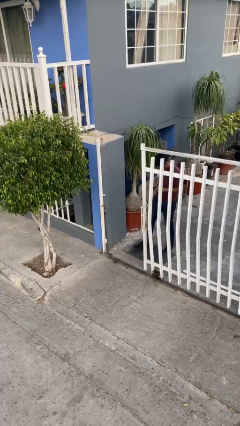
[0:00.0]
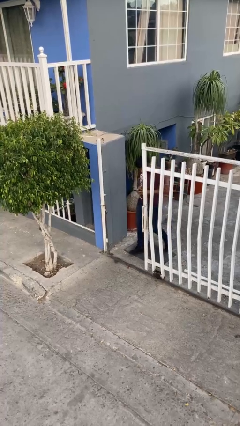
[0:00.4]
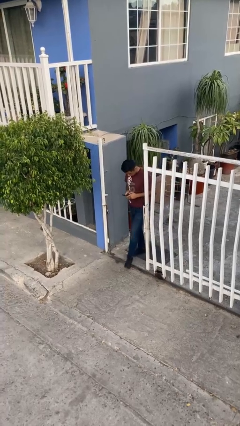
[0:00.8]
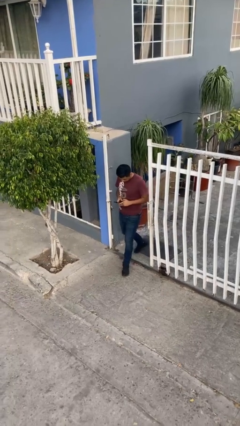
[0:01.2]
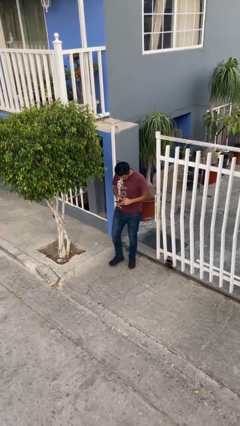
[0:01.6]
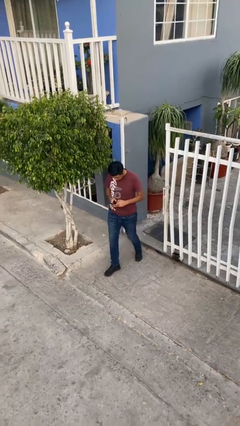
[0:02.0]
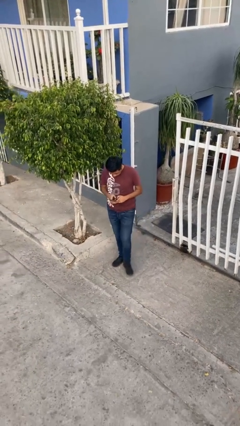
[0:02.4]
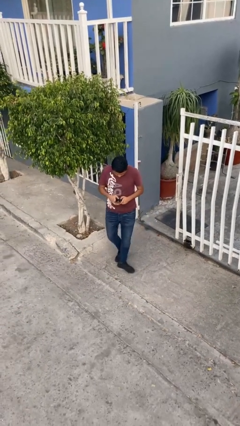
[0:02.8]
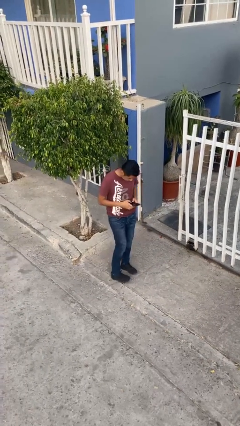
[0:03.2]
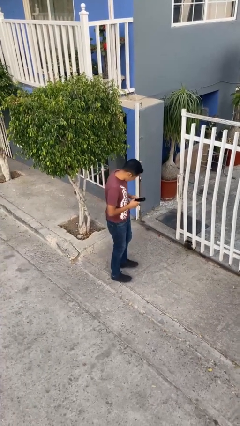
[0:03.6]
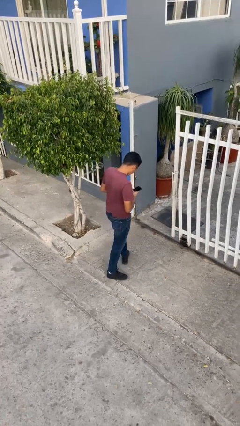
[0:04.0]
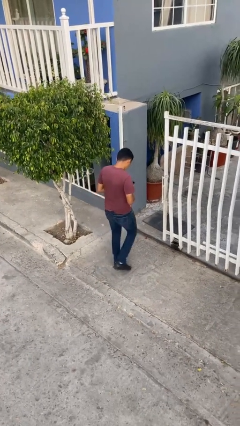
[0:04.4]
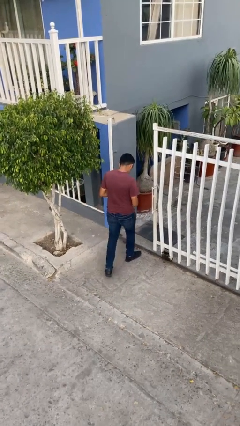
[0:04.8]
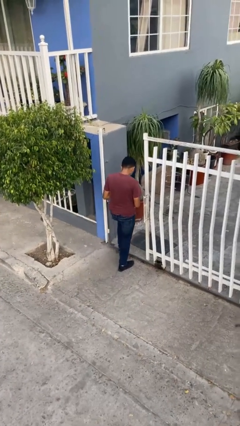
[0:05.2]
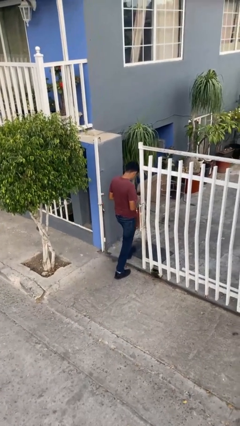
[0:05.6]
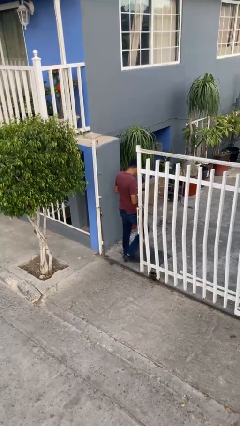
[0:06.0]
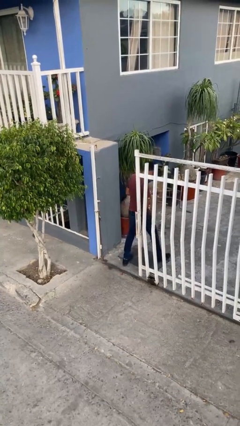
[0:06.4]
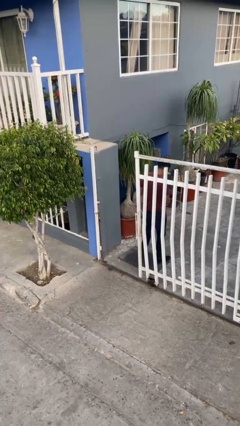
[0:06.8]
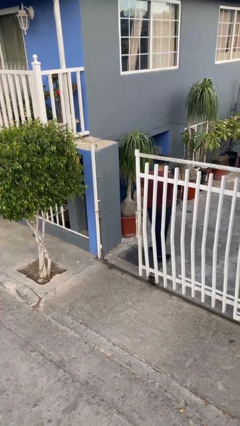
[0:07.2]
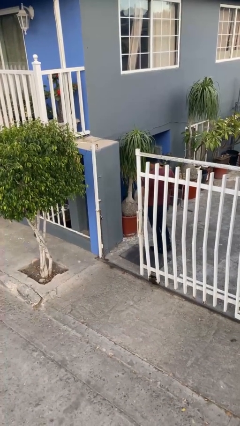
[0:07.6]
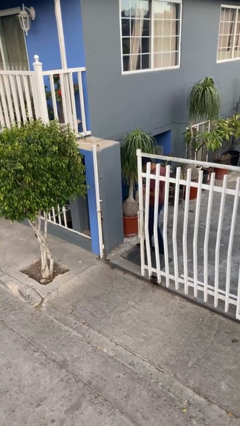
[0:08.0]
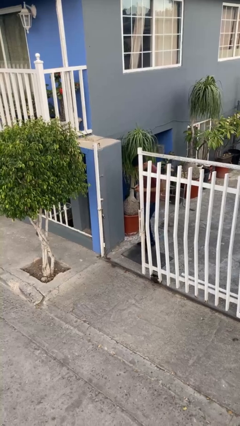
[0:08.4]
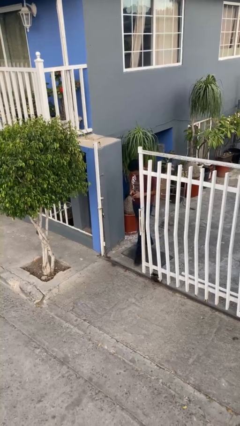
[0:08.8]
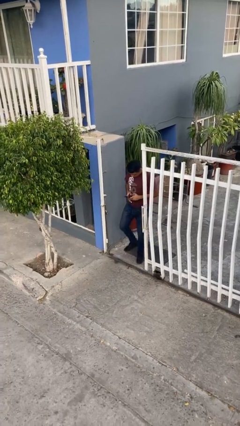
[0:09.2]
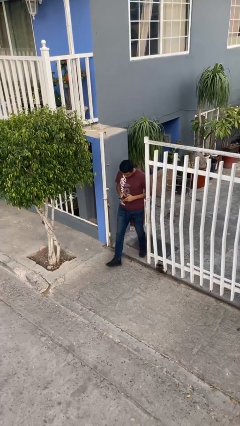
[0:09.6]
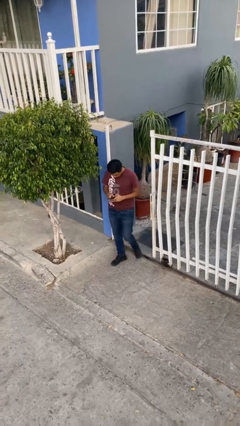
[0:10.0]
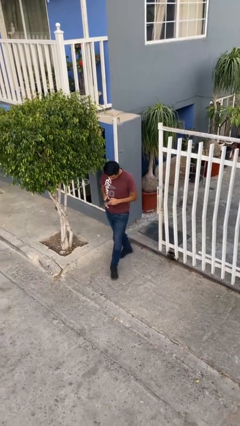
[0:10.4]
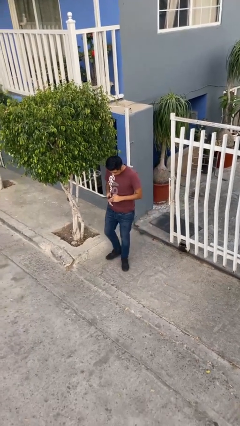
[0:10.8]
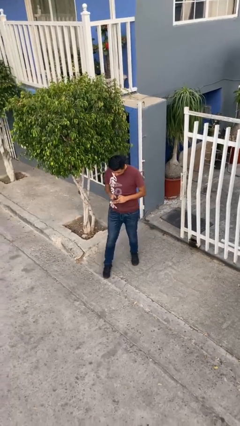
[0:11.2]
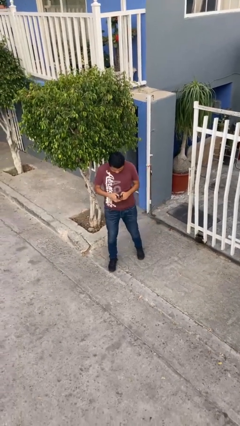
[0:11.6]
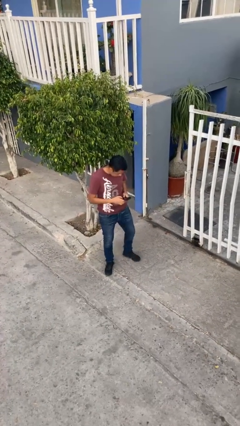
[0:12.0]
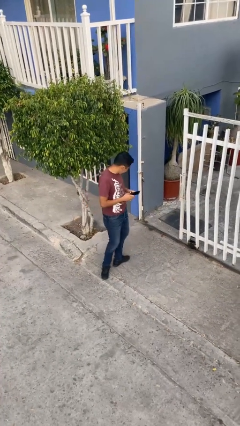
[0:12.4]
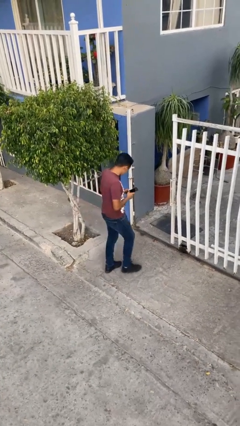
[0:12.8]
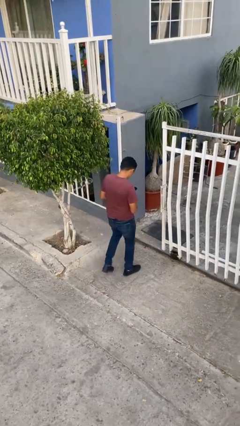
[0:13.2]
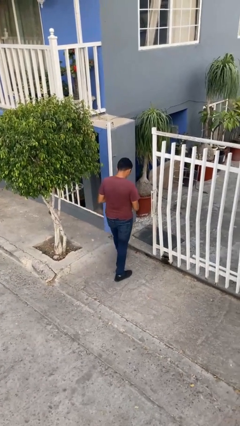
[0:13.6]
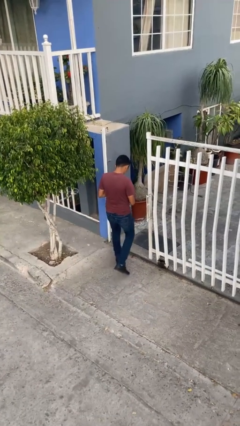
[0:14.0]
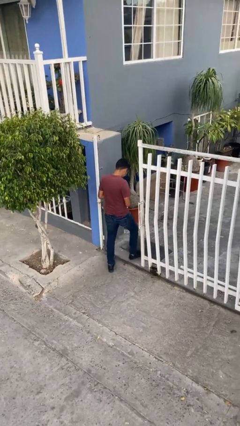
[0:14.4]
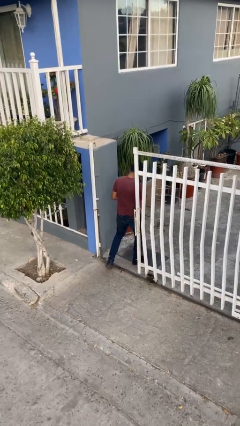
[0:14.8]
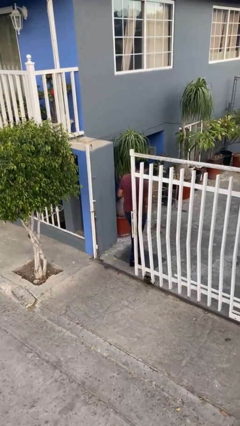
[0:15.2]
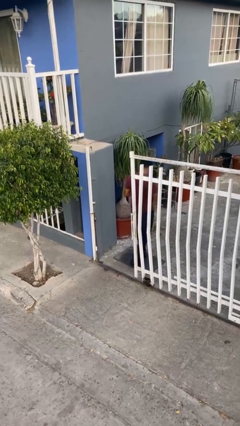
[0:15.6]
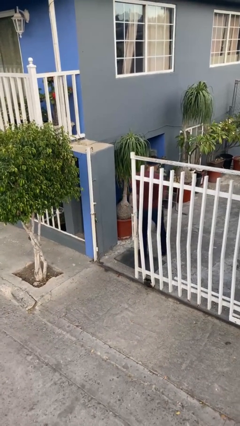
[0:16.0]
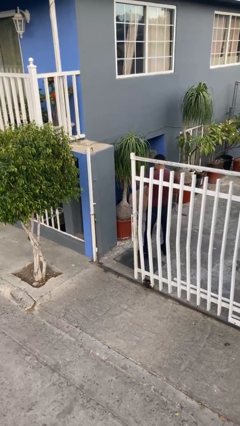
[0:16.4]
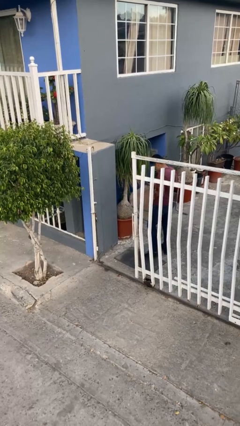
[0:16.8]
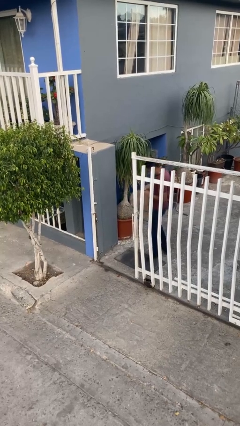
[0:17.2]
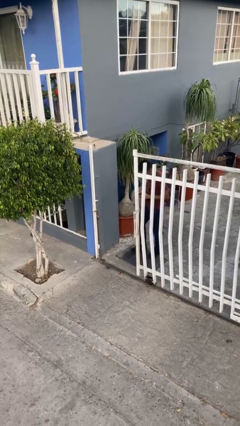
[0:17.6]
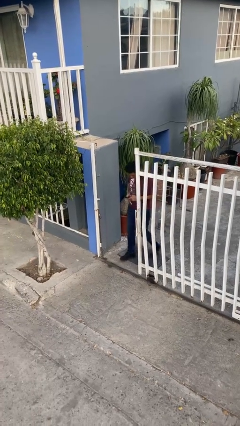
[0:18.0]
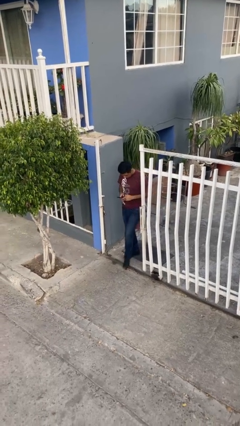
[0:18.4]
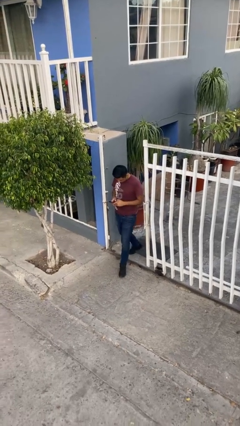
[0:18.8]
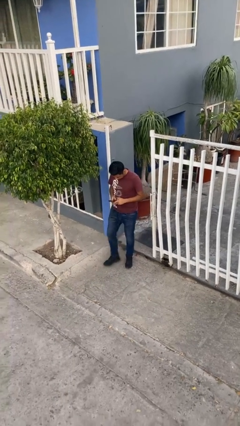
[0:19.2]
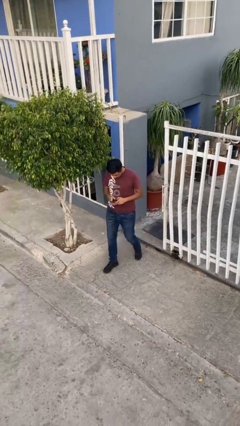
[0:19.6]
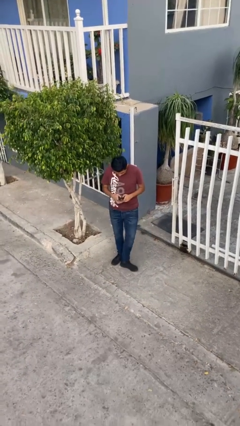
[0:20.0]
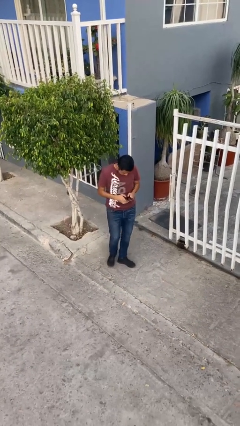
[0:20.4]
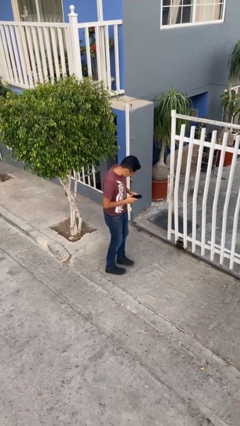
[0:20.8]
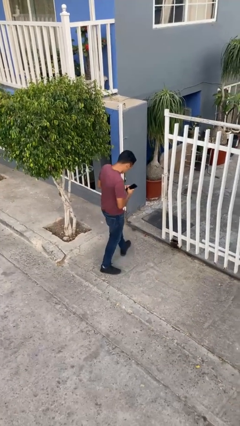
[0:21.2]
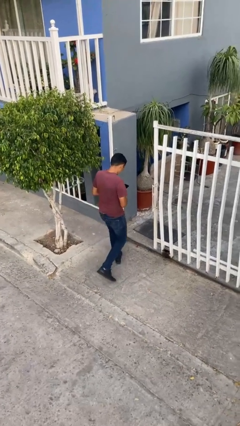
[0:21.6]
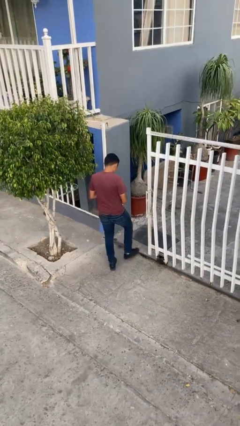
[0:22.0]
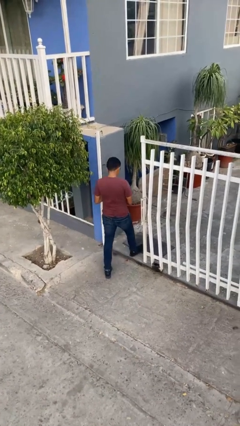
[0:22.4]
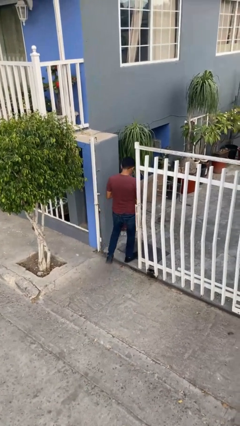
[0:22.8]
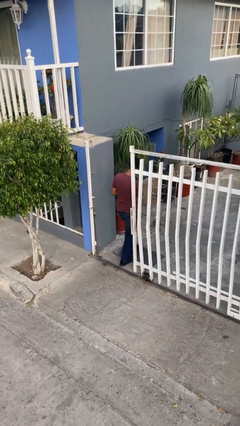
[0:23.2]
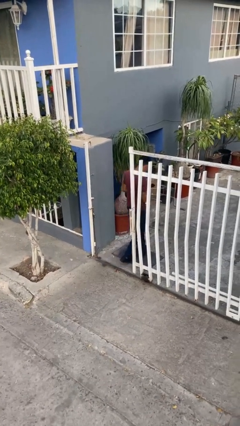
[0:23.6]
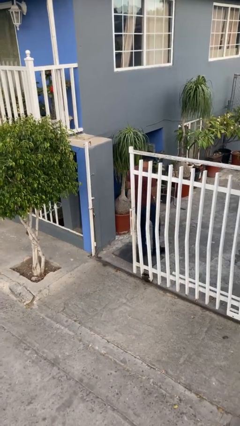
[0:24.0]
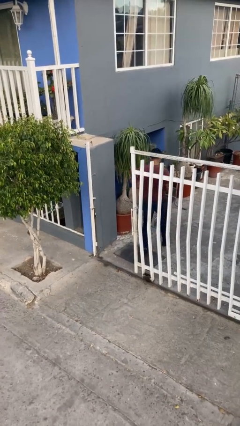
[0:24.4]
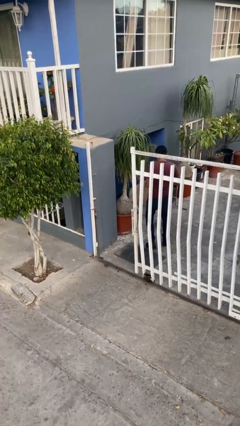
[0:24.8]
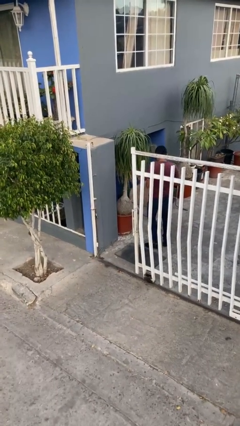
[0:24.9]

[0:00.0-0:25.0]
person texts on phone

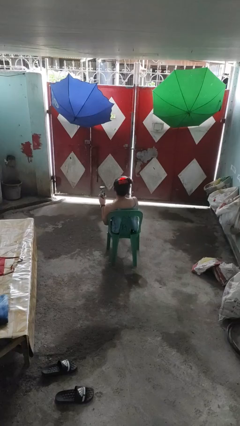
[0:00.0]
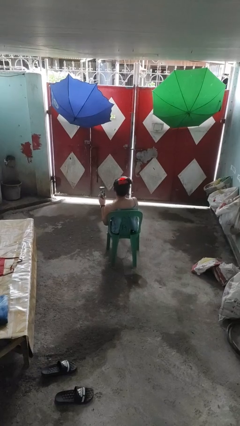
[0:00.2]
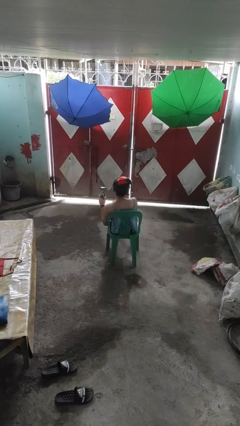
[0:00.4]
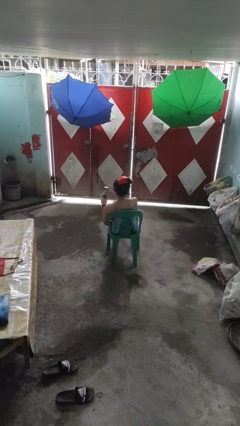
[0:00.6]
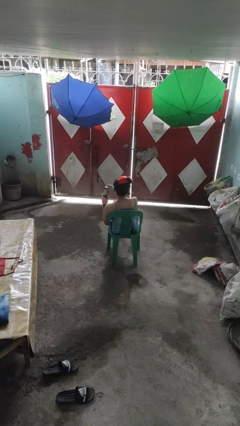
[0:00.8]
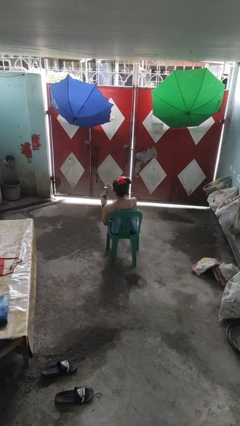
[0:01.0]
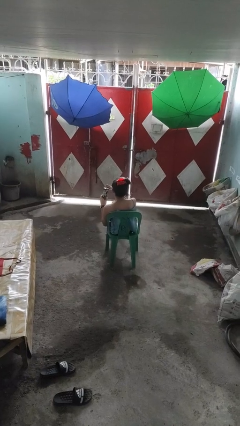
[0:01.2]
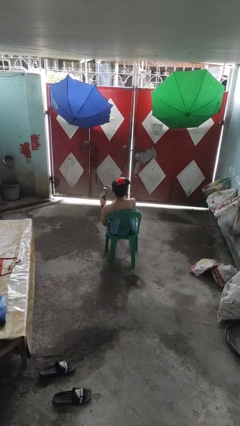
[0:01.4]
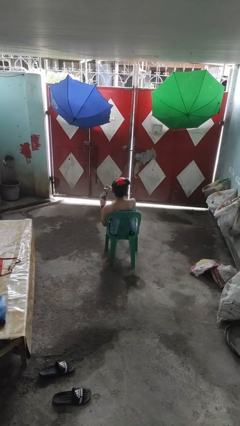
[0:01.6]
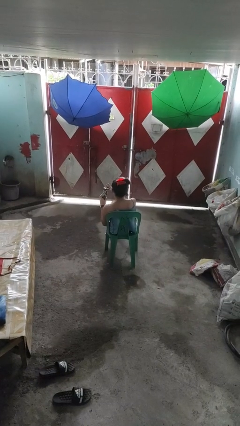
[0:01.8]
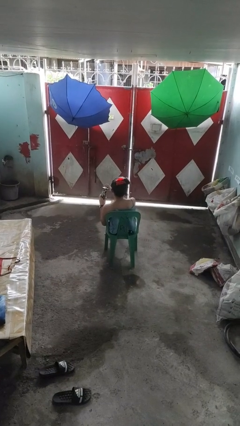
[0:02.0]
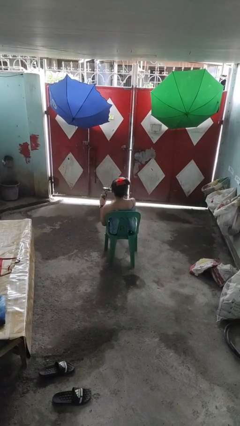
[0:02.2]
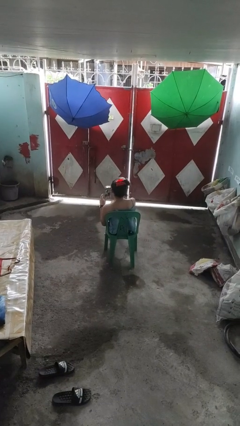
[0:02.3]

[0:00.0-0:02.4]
person opens beverage can

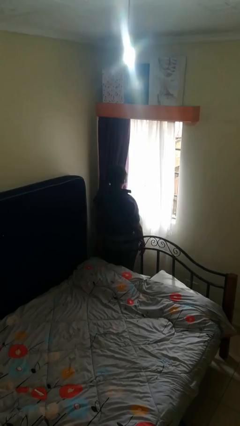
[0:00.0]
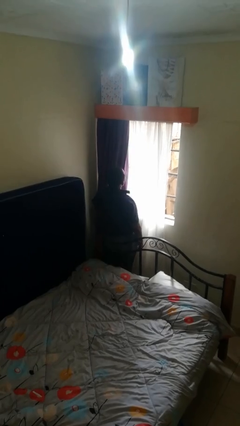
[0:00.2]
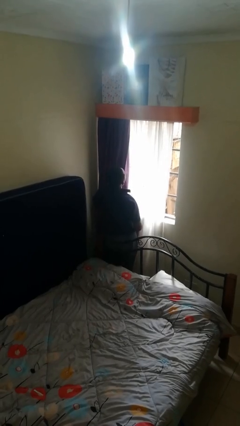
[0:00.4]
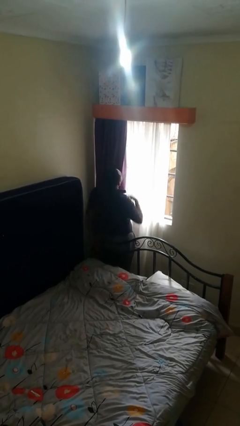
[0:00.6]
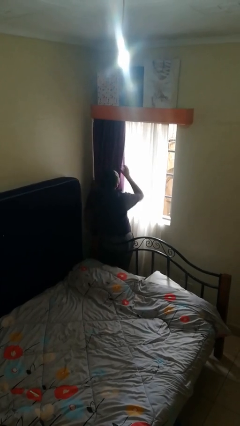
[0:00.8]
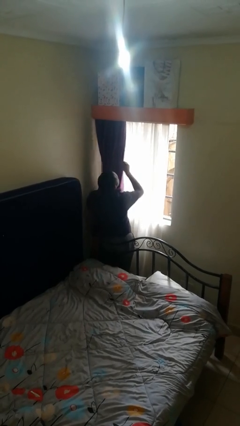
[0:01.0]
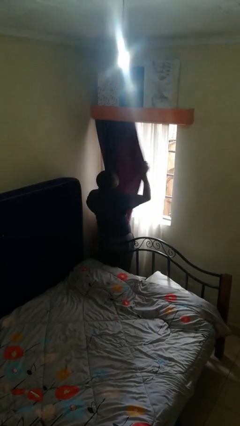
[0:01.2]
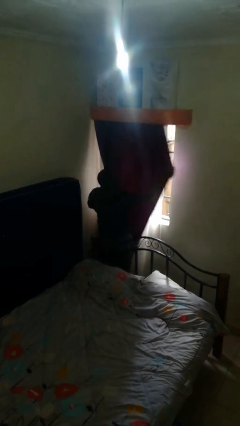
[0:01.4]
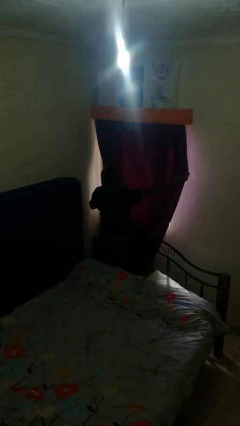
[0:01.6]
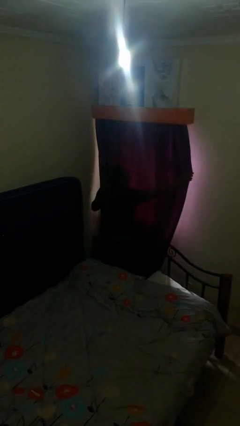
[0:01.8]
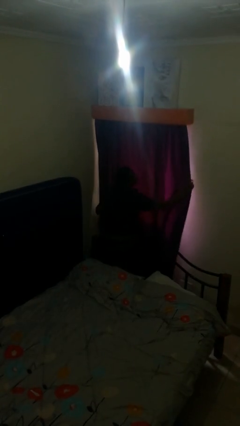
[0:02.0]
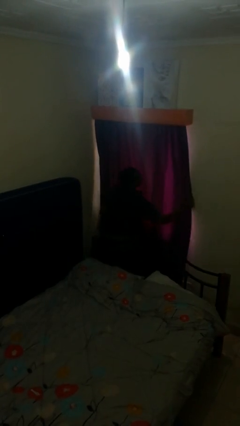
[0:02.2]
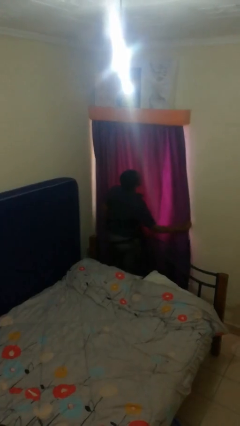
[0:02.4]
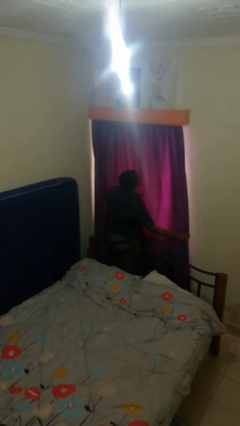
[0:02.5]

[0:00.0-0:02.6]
person closes curtains

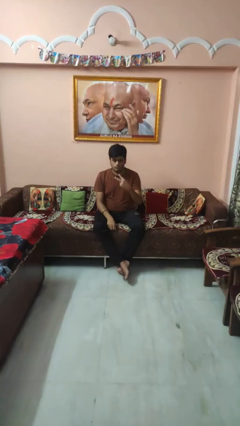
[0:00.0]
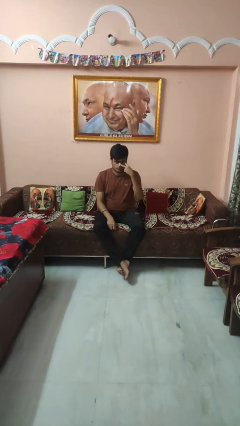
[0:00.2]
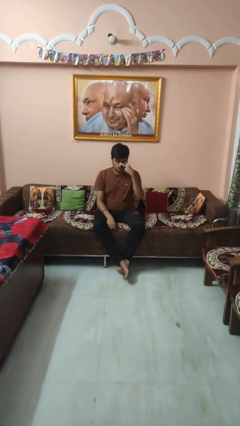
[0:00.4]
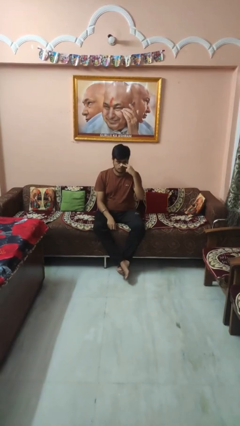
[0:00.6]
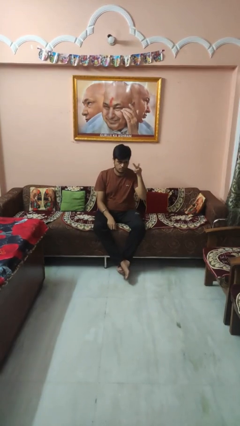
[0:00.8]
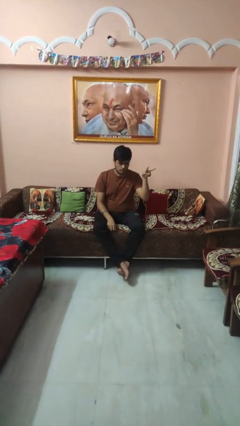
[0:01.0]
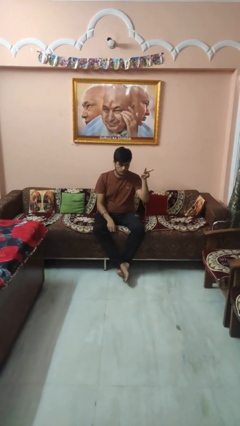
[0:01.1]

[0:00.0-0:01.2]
person gestures watch closely
